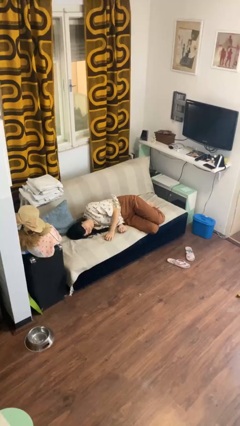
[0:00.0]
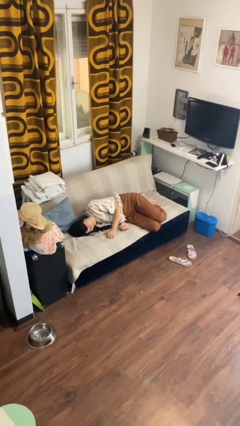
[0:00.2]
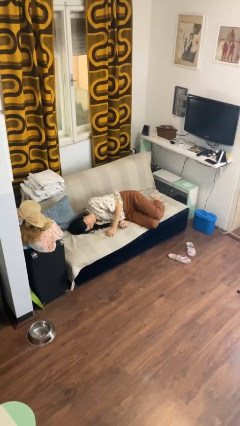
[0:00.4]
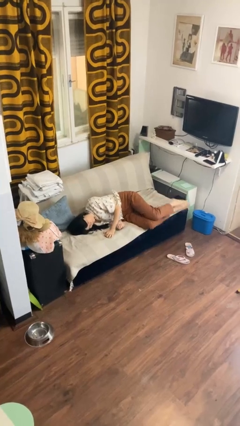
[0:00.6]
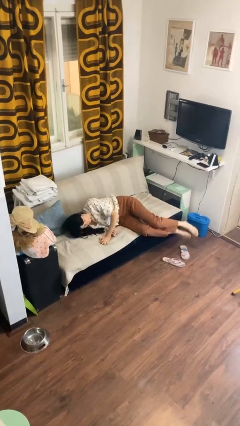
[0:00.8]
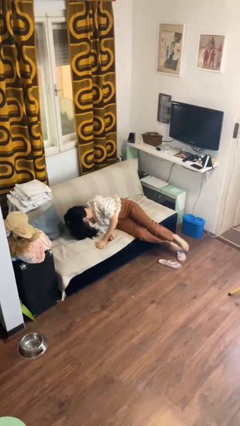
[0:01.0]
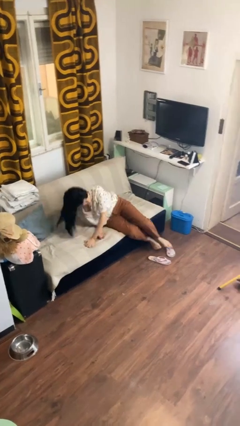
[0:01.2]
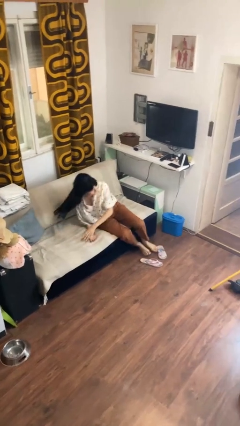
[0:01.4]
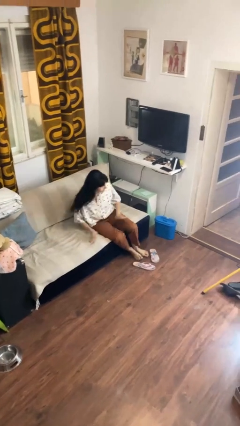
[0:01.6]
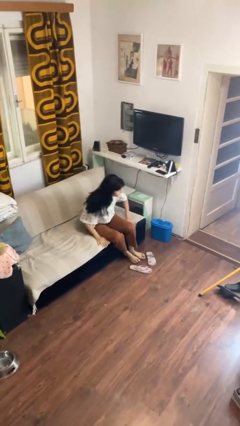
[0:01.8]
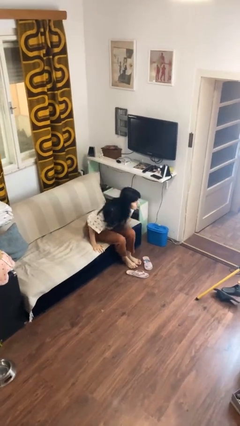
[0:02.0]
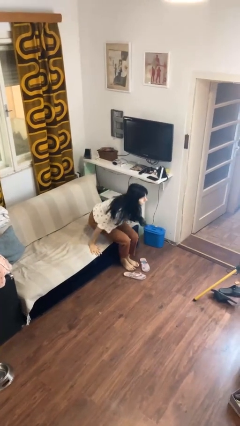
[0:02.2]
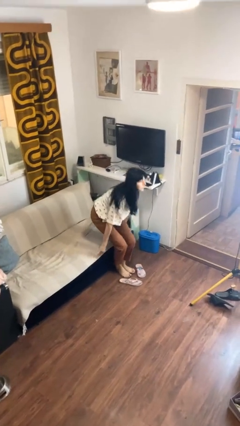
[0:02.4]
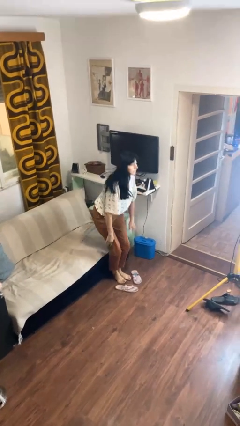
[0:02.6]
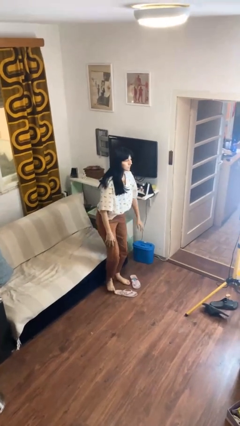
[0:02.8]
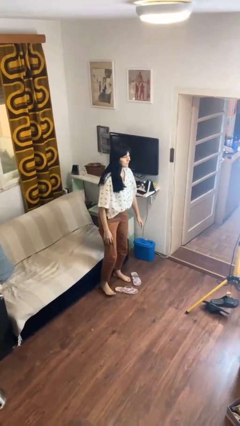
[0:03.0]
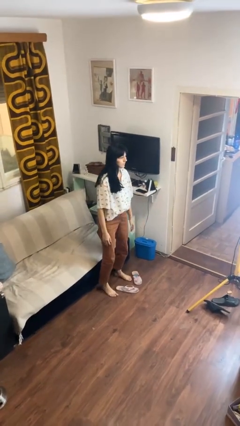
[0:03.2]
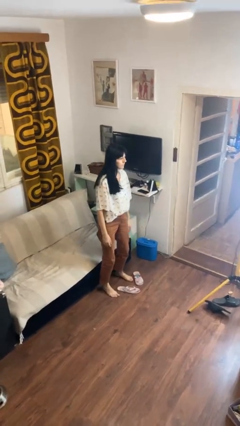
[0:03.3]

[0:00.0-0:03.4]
person stands up

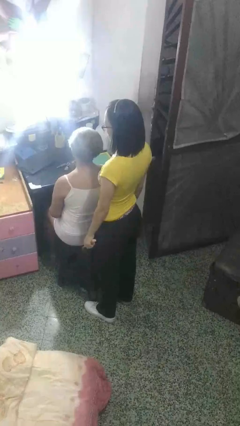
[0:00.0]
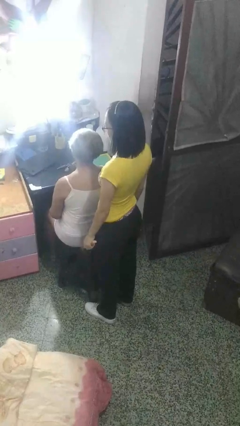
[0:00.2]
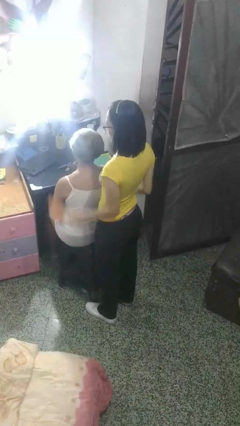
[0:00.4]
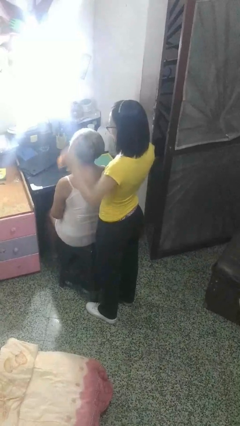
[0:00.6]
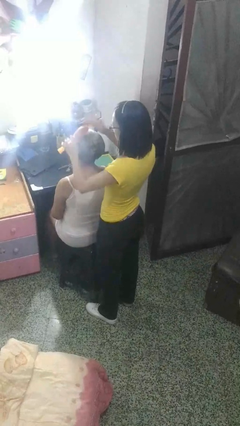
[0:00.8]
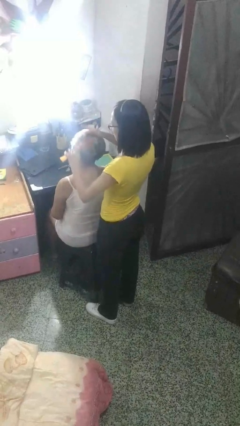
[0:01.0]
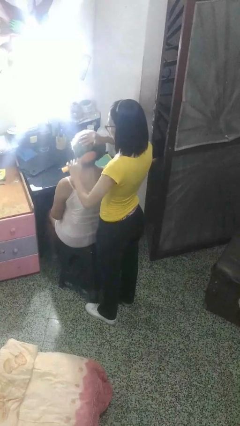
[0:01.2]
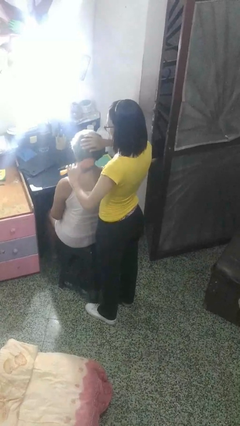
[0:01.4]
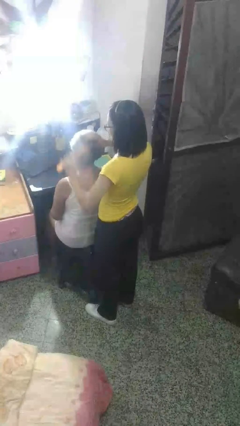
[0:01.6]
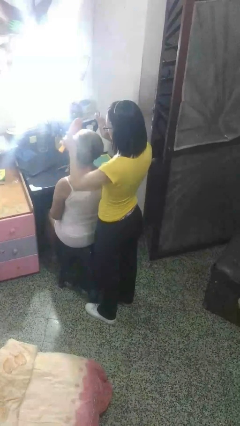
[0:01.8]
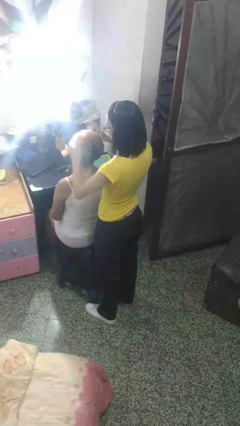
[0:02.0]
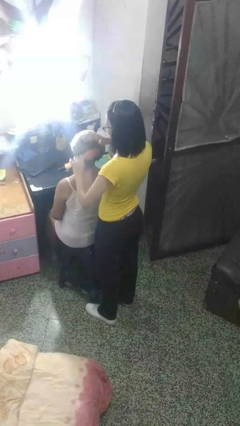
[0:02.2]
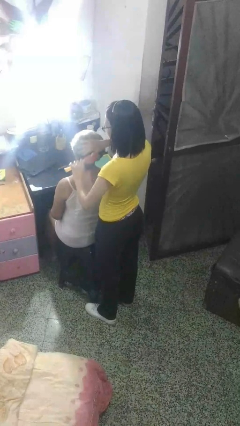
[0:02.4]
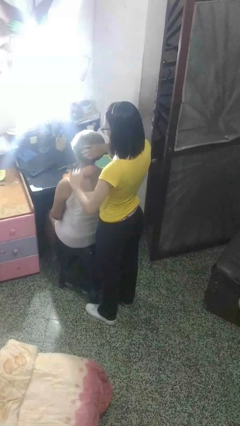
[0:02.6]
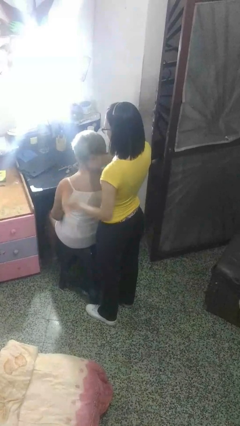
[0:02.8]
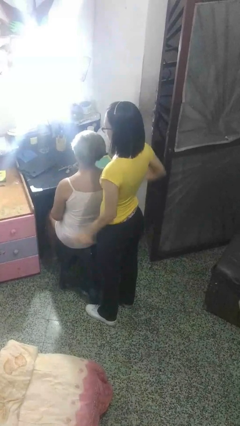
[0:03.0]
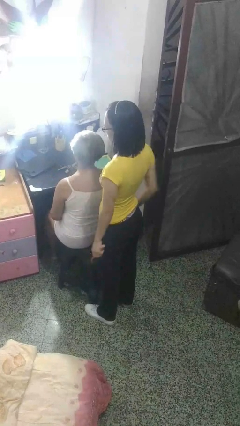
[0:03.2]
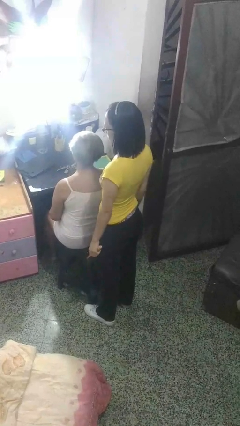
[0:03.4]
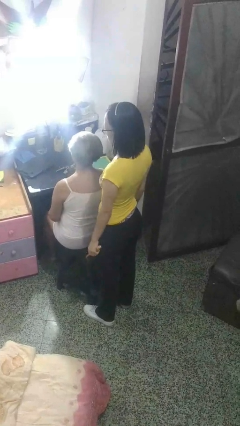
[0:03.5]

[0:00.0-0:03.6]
person brushes hair of person

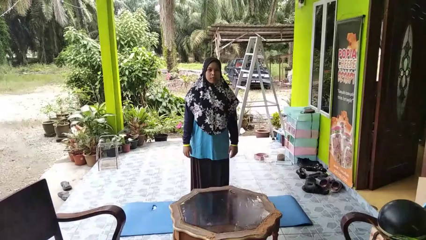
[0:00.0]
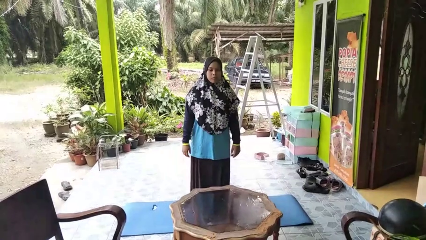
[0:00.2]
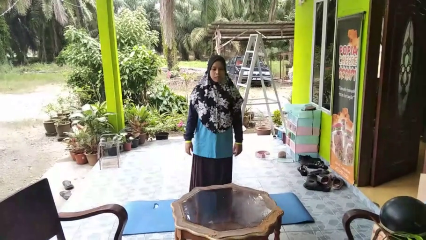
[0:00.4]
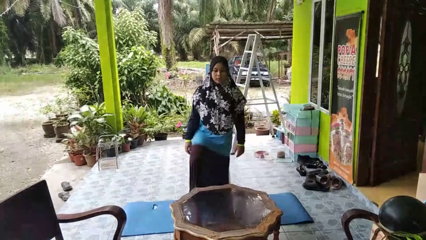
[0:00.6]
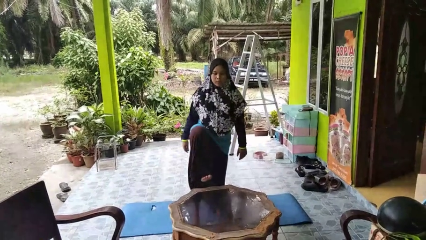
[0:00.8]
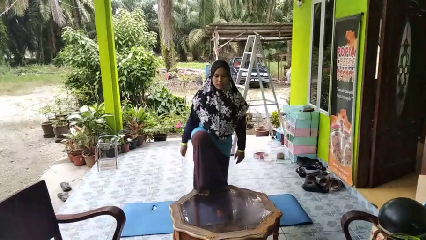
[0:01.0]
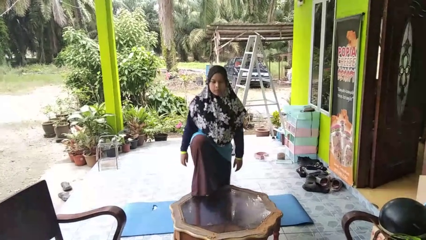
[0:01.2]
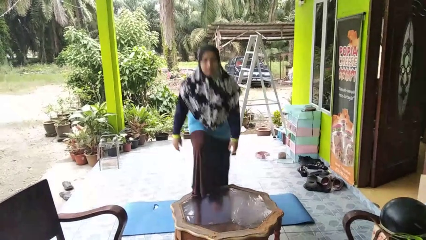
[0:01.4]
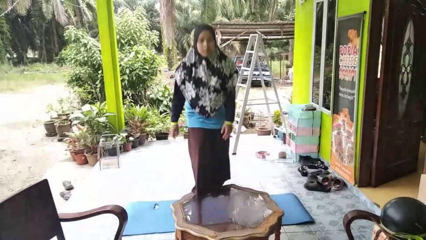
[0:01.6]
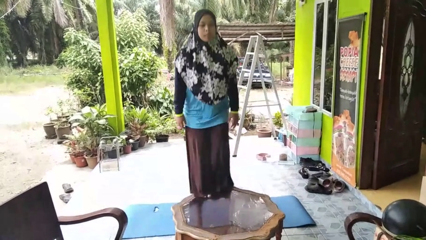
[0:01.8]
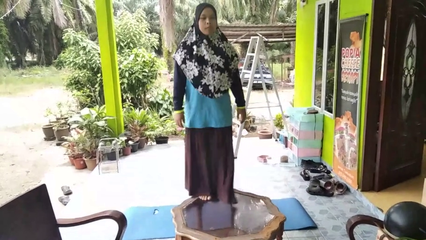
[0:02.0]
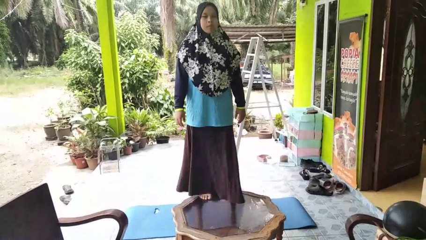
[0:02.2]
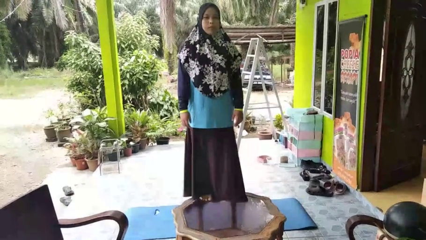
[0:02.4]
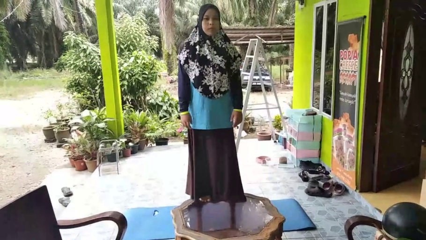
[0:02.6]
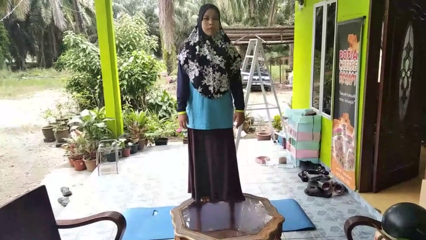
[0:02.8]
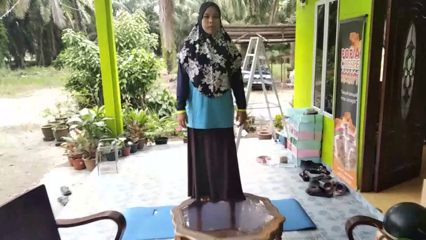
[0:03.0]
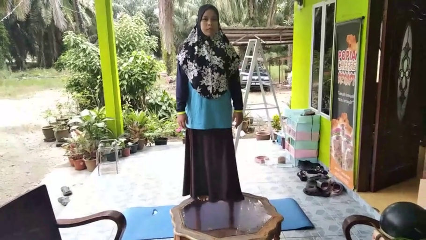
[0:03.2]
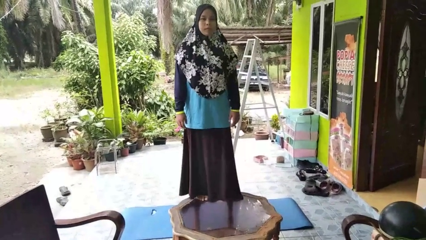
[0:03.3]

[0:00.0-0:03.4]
person climbs on table

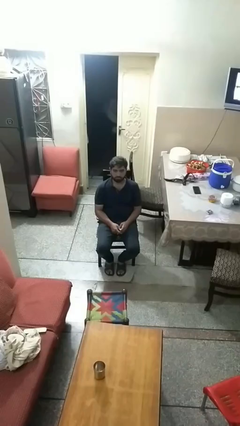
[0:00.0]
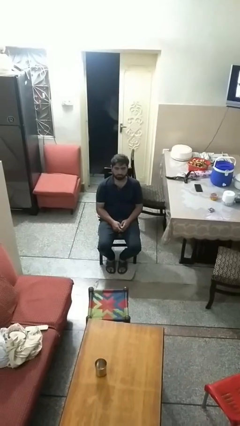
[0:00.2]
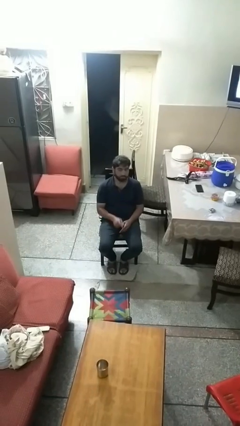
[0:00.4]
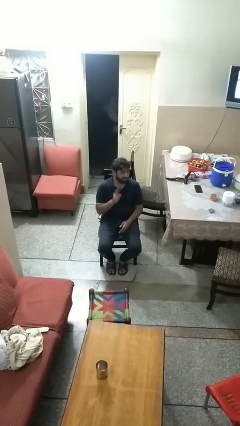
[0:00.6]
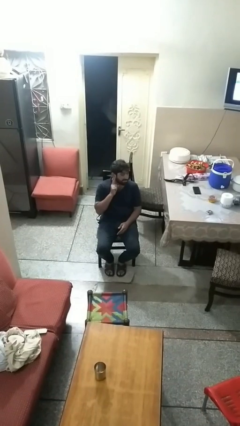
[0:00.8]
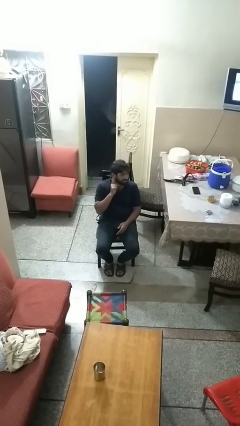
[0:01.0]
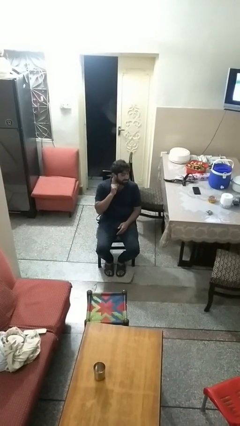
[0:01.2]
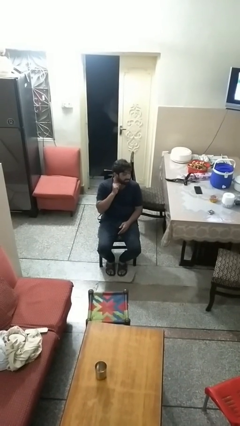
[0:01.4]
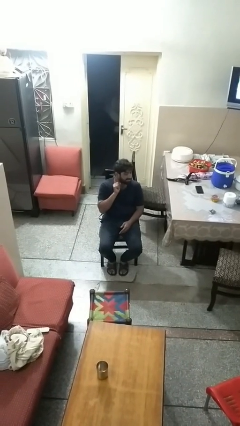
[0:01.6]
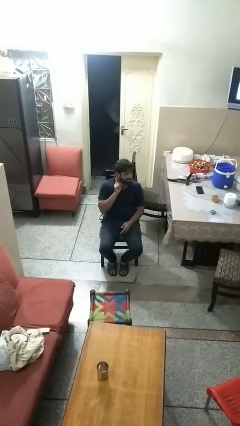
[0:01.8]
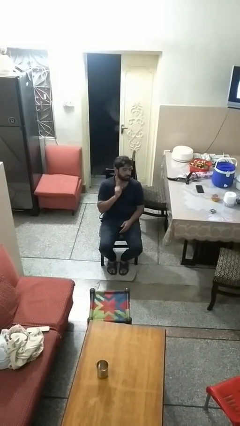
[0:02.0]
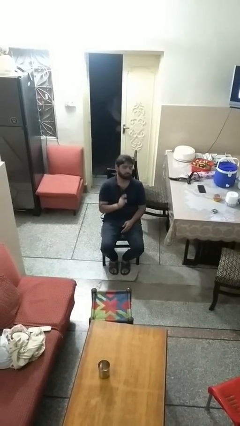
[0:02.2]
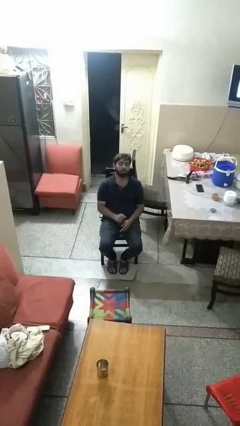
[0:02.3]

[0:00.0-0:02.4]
person gestures listen closely

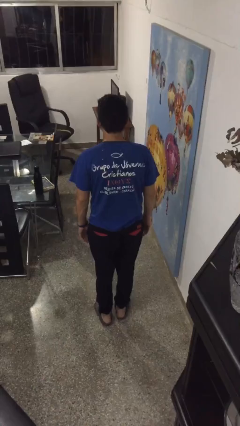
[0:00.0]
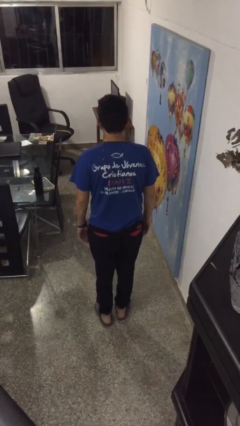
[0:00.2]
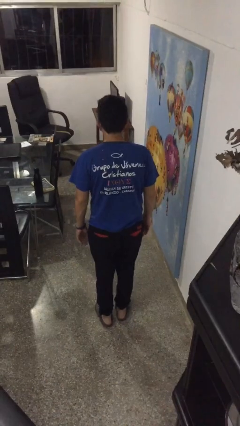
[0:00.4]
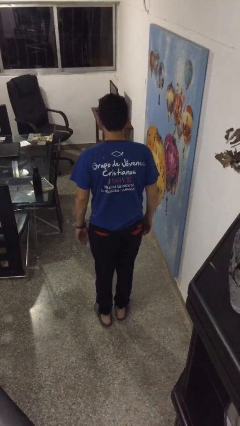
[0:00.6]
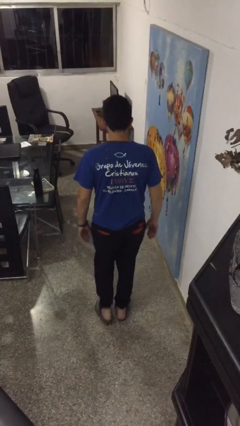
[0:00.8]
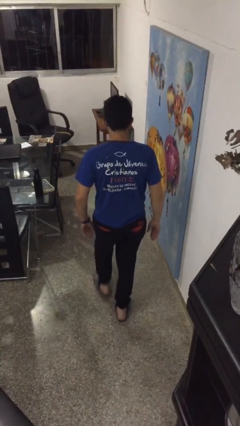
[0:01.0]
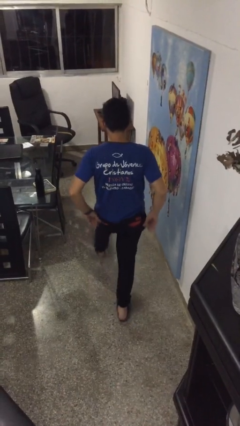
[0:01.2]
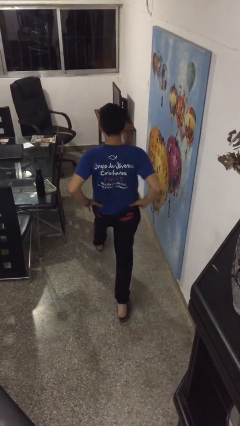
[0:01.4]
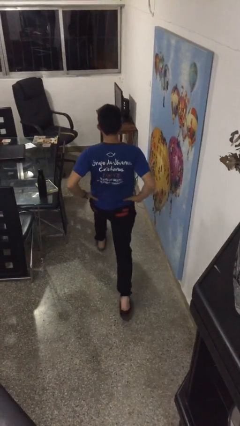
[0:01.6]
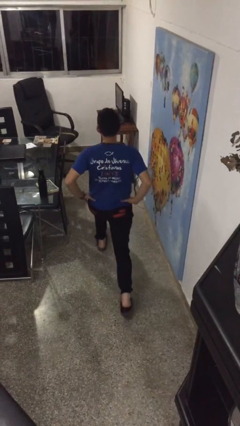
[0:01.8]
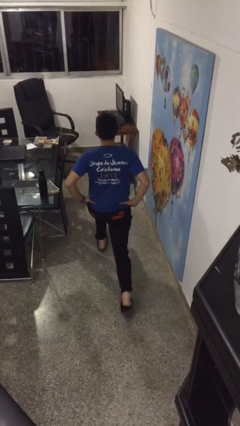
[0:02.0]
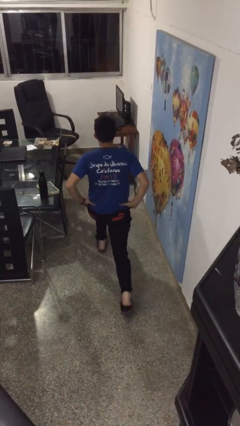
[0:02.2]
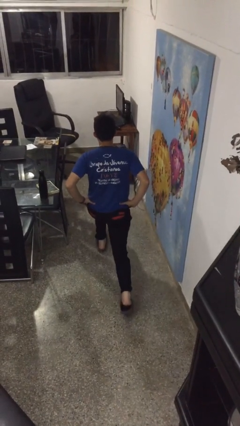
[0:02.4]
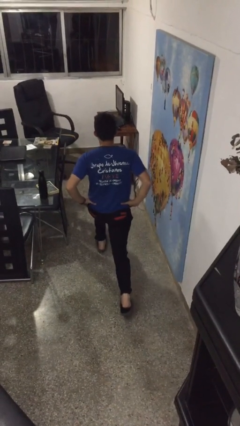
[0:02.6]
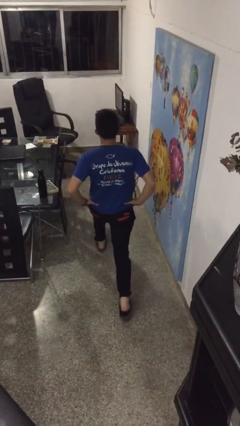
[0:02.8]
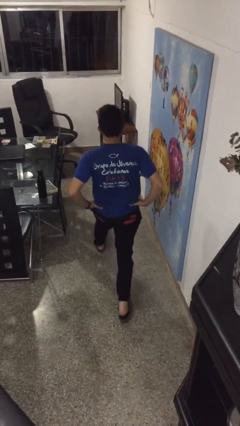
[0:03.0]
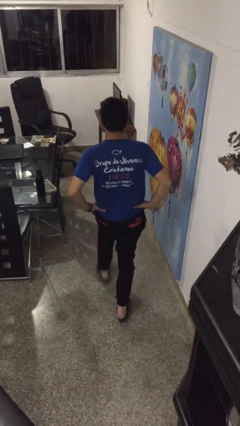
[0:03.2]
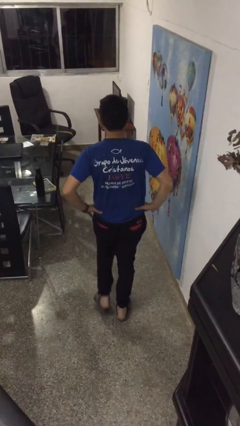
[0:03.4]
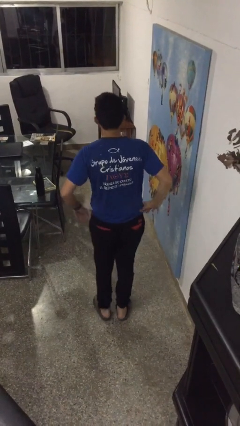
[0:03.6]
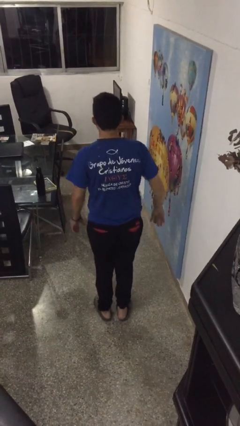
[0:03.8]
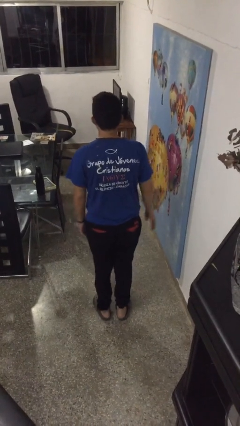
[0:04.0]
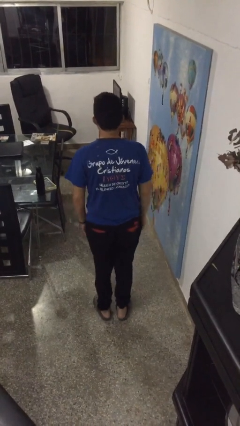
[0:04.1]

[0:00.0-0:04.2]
person exercises with lunges

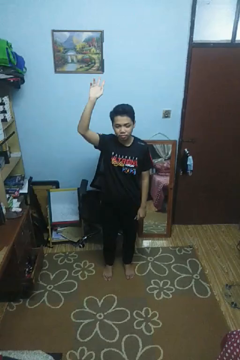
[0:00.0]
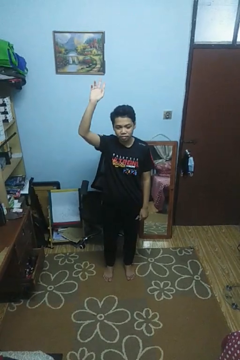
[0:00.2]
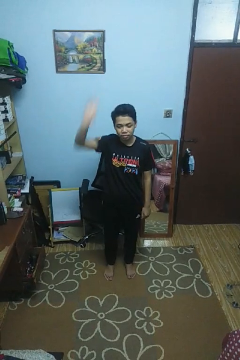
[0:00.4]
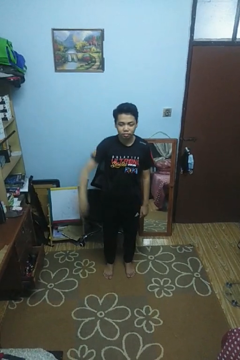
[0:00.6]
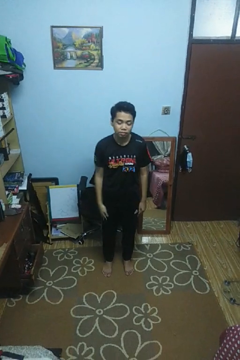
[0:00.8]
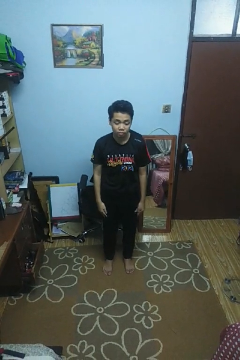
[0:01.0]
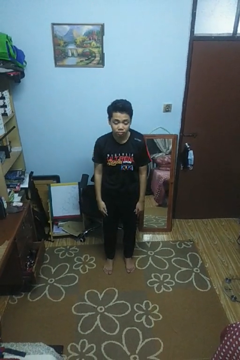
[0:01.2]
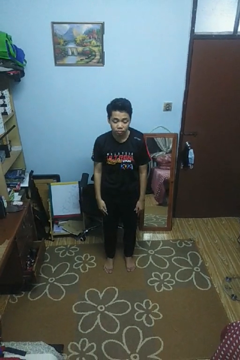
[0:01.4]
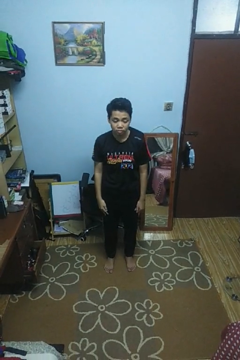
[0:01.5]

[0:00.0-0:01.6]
person gestures lower hand
